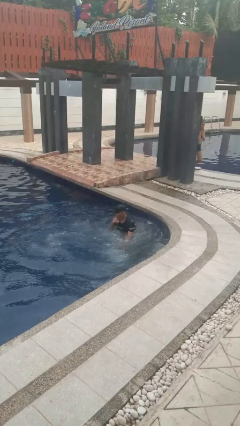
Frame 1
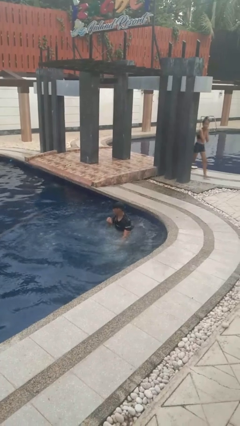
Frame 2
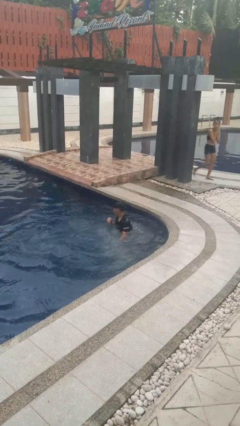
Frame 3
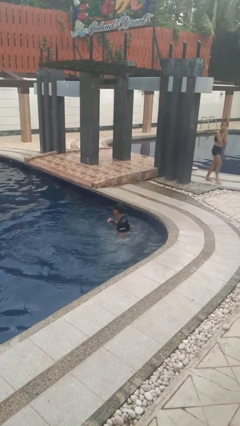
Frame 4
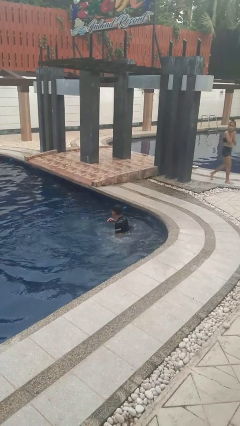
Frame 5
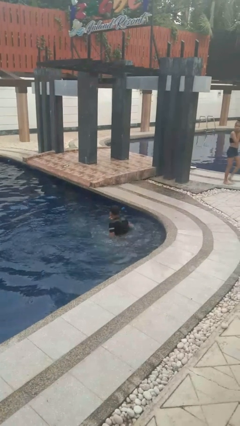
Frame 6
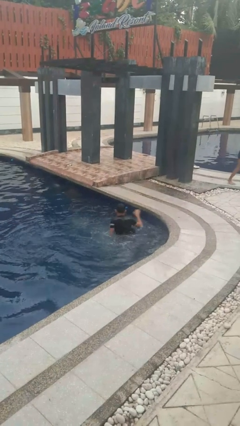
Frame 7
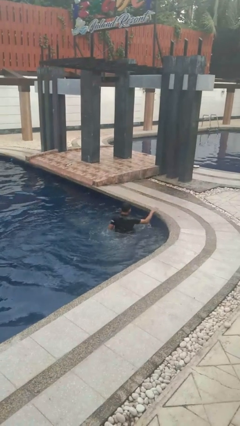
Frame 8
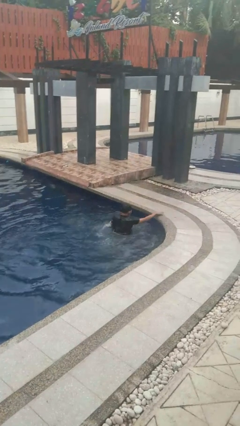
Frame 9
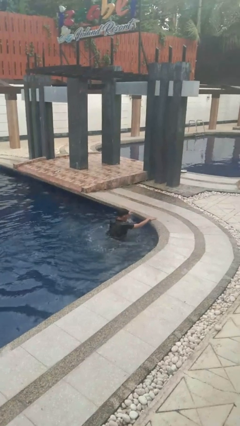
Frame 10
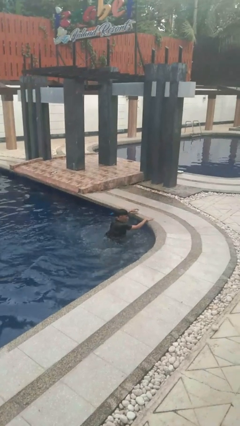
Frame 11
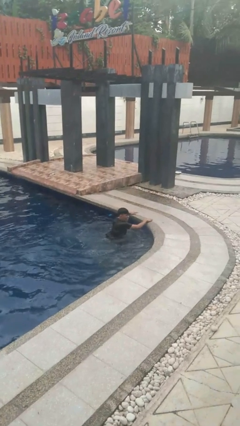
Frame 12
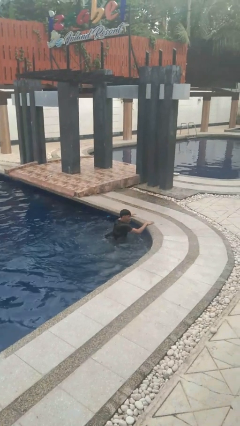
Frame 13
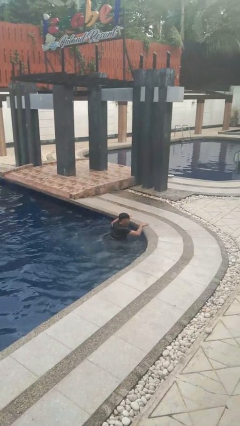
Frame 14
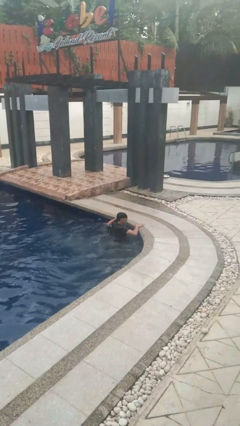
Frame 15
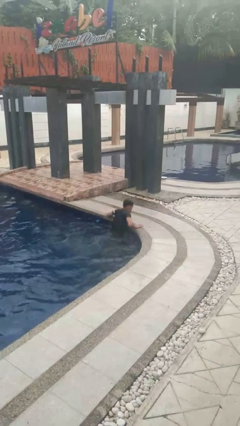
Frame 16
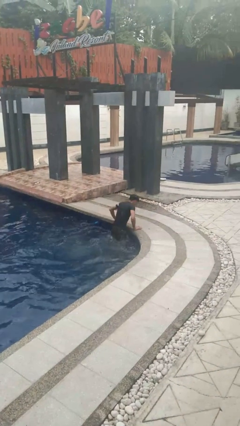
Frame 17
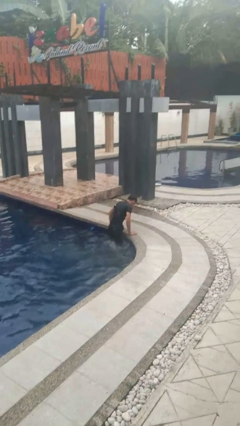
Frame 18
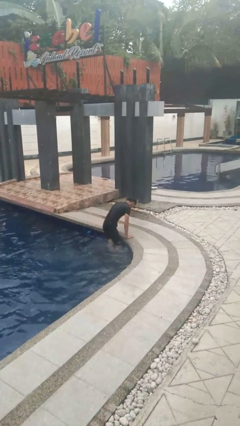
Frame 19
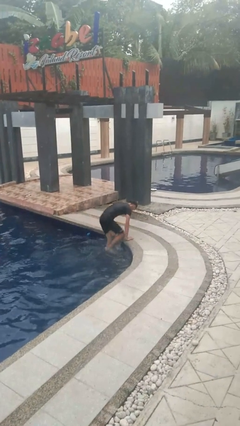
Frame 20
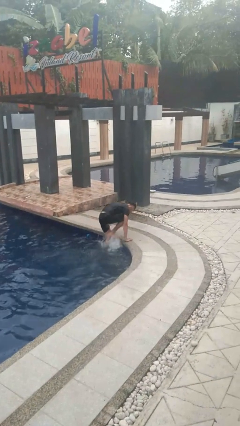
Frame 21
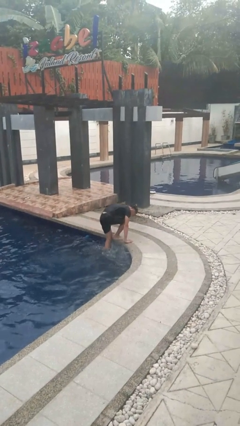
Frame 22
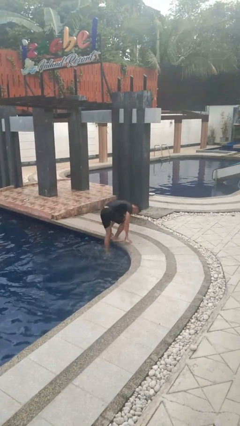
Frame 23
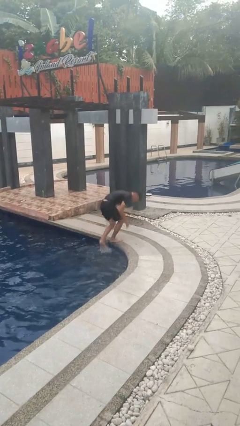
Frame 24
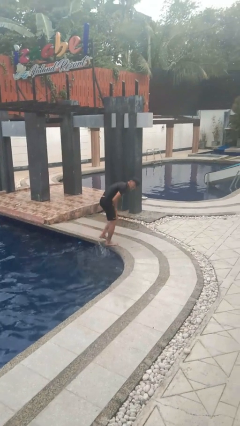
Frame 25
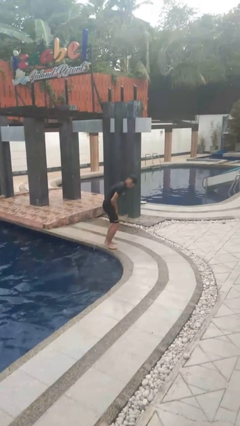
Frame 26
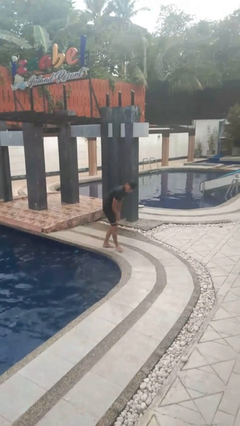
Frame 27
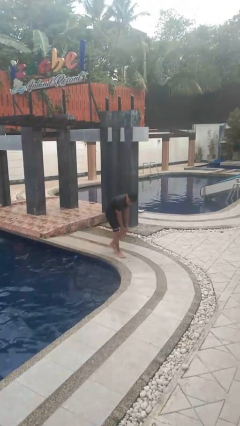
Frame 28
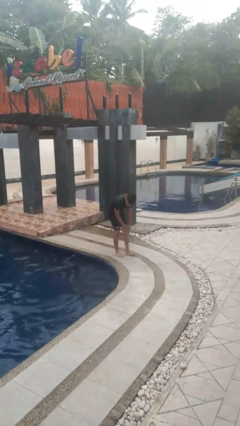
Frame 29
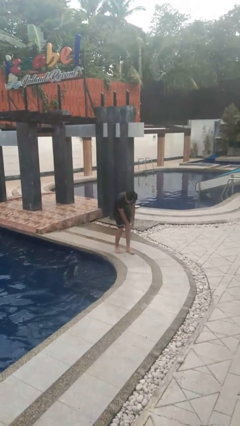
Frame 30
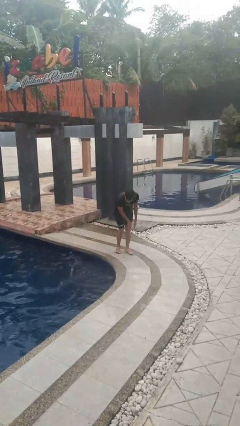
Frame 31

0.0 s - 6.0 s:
person exits pool

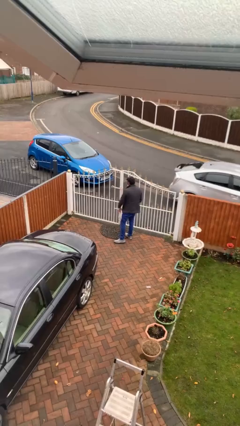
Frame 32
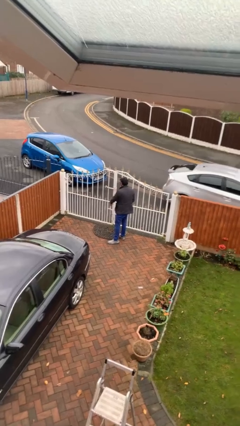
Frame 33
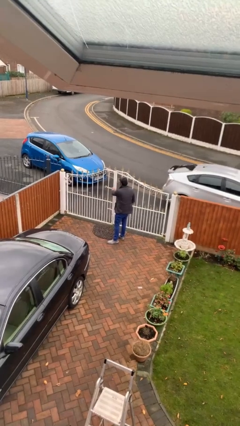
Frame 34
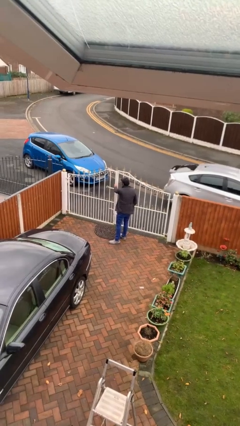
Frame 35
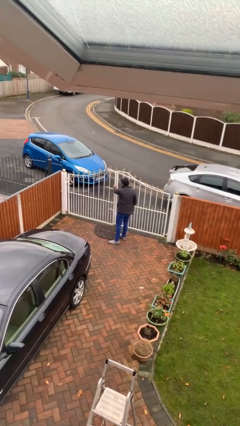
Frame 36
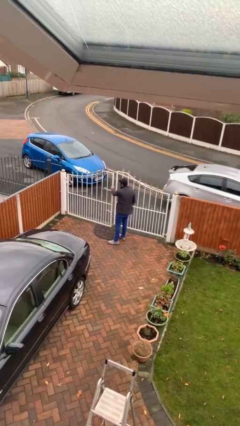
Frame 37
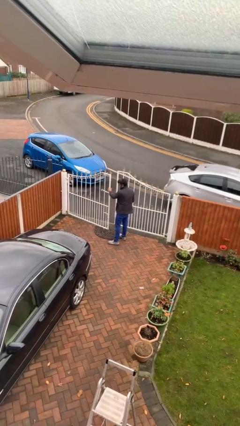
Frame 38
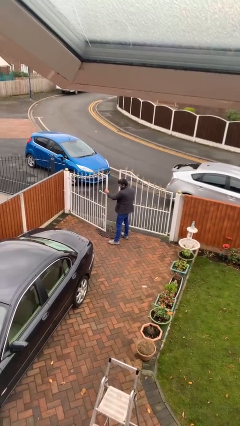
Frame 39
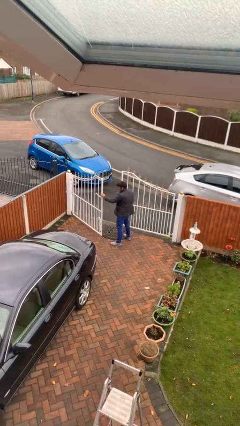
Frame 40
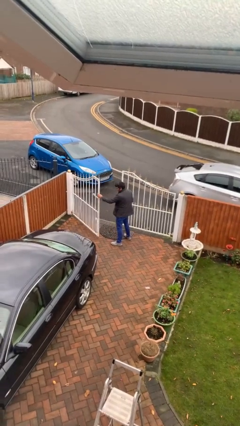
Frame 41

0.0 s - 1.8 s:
person opens facility door

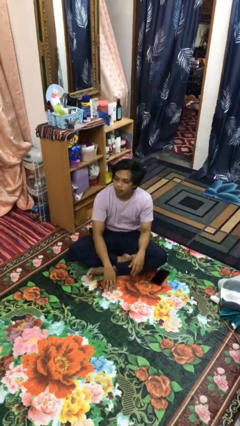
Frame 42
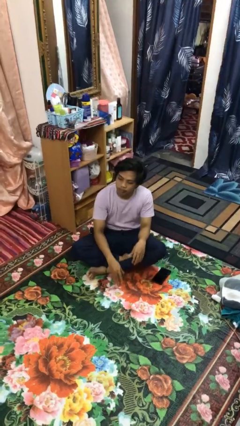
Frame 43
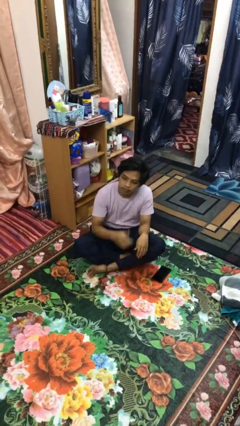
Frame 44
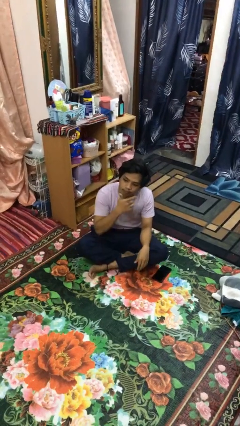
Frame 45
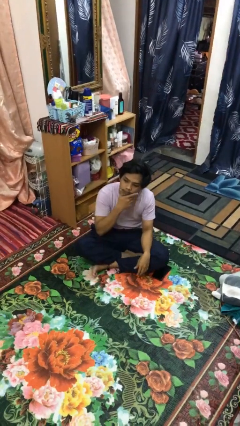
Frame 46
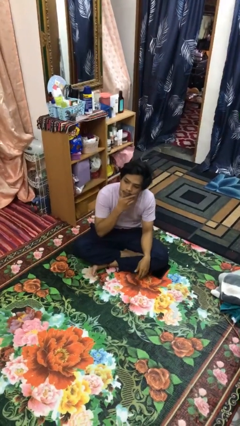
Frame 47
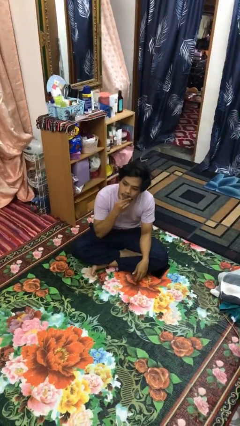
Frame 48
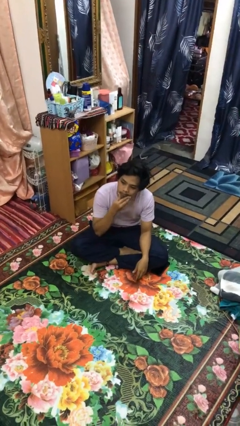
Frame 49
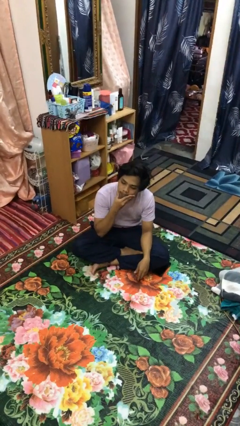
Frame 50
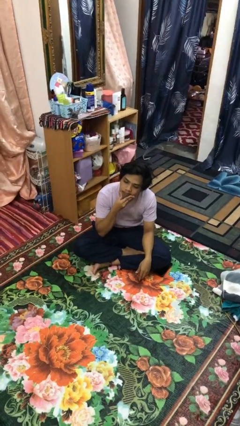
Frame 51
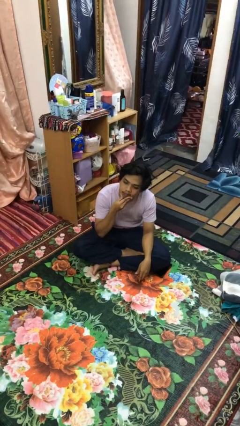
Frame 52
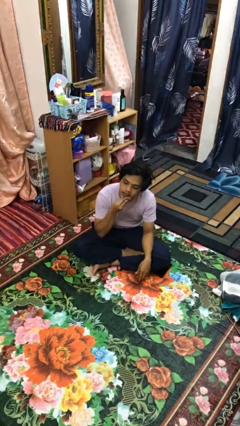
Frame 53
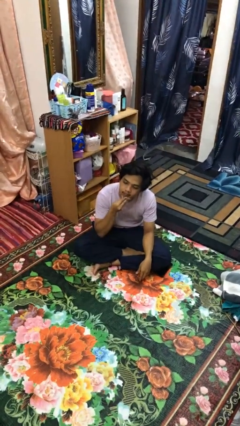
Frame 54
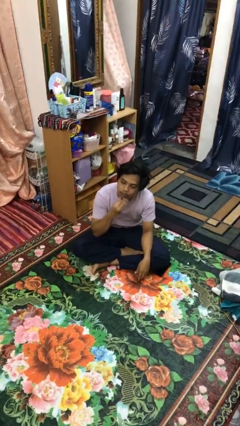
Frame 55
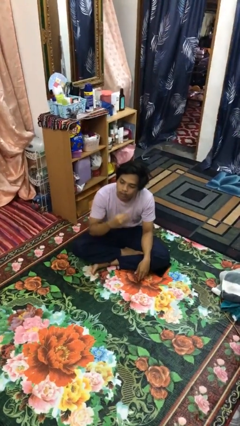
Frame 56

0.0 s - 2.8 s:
person strokes chin

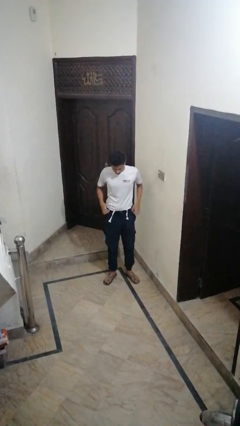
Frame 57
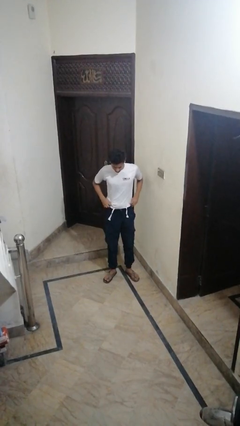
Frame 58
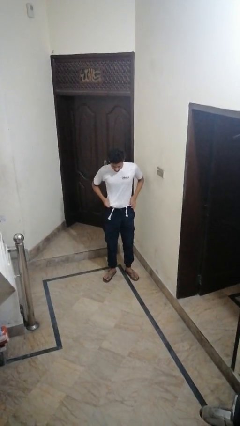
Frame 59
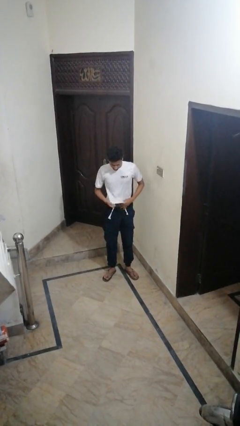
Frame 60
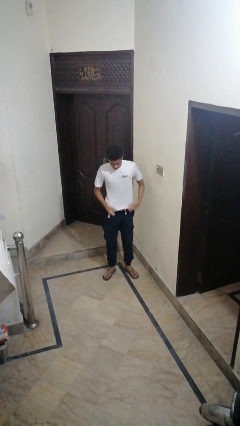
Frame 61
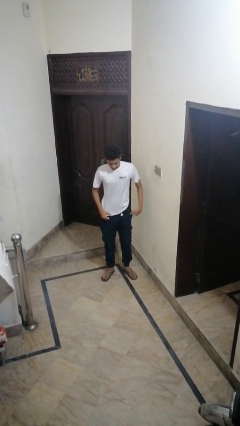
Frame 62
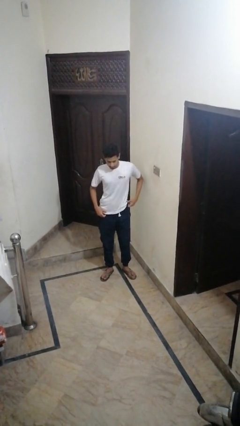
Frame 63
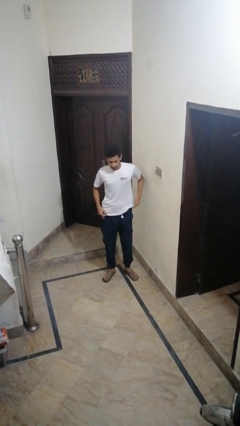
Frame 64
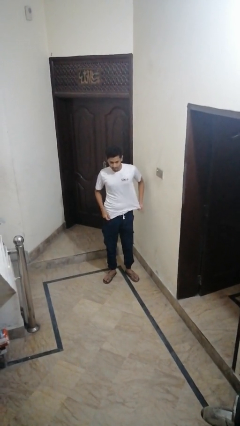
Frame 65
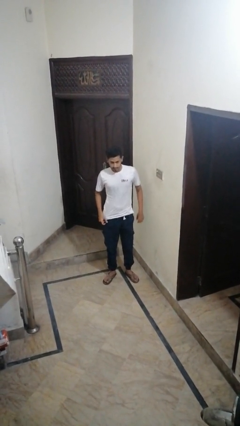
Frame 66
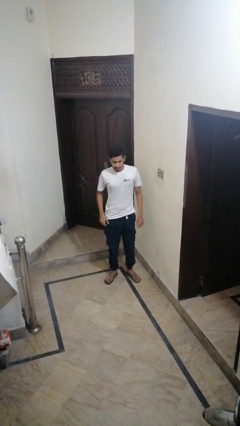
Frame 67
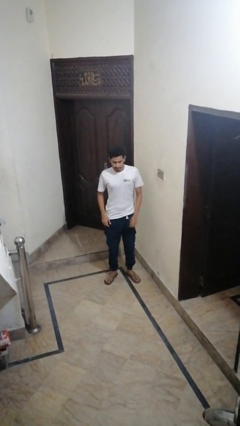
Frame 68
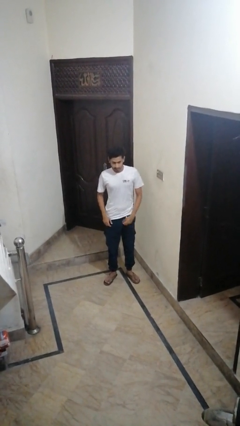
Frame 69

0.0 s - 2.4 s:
person untucks shirt

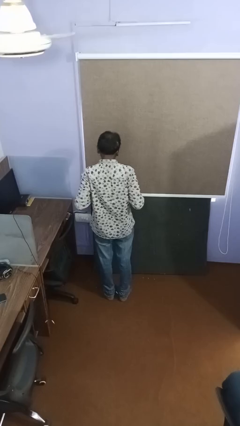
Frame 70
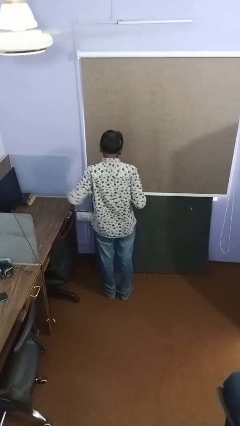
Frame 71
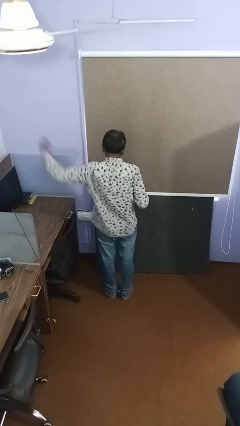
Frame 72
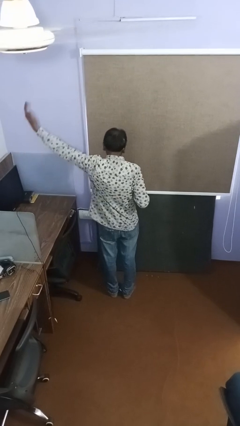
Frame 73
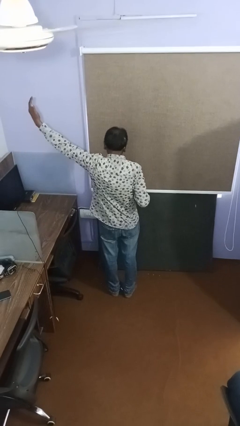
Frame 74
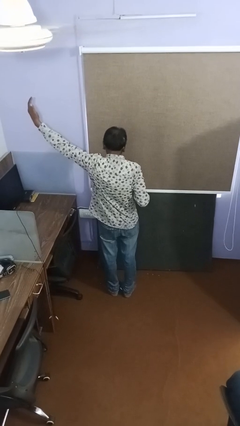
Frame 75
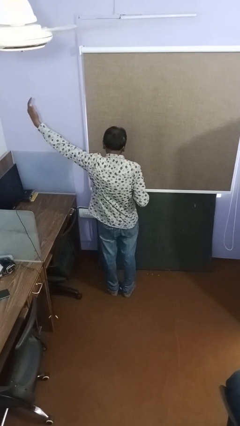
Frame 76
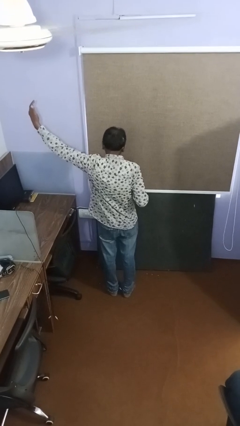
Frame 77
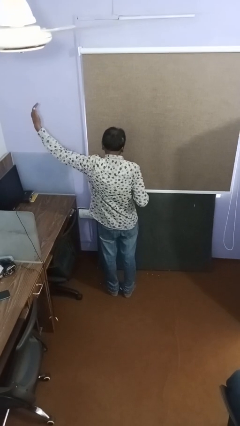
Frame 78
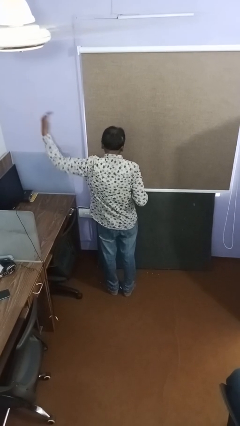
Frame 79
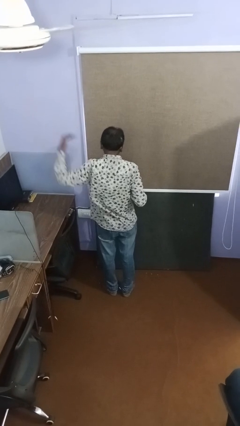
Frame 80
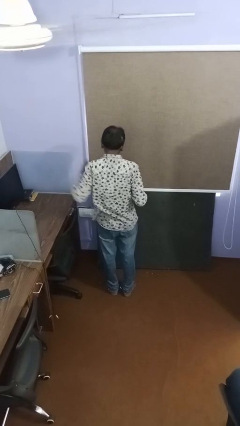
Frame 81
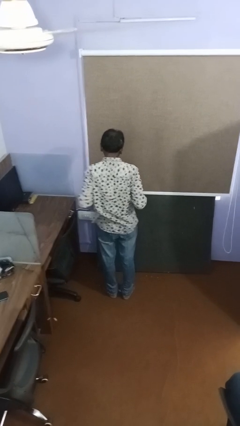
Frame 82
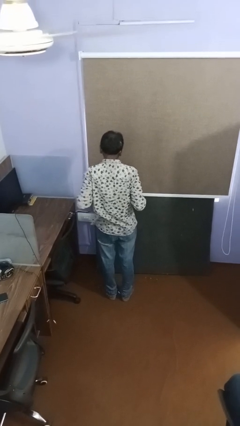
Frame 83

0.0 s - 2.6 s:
person gestures swipe left

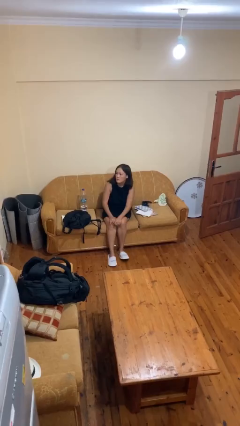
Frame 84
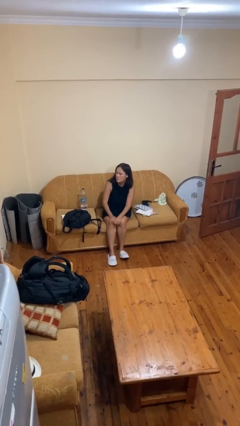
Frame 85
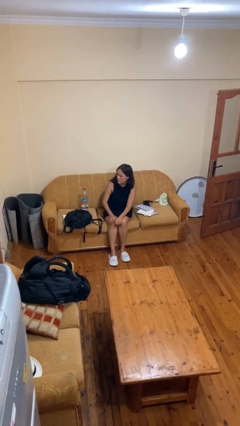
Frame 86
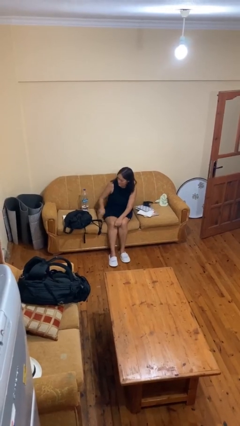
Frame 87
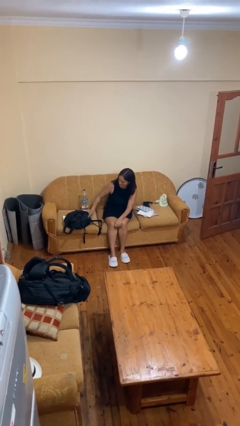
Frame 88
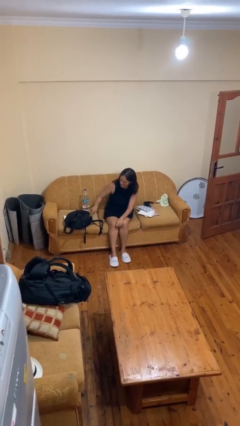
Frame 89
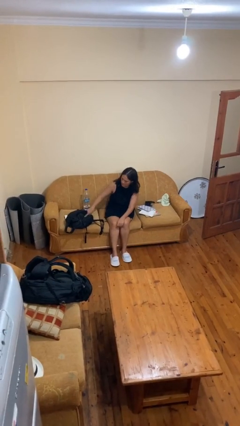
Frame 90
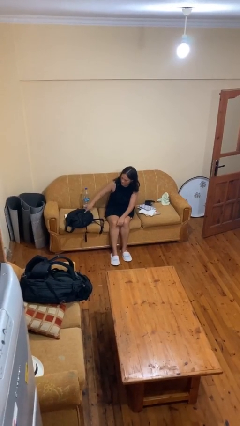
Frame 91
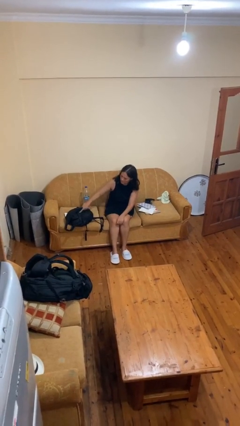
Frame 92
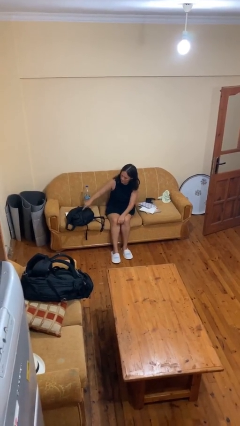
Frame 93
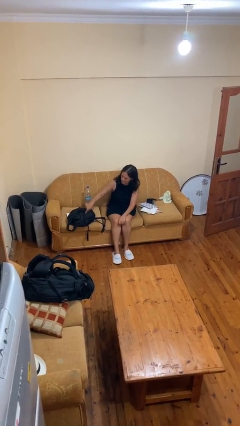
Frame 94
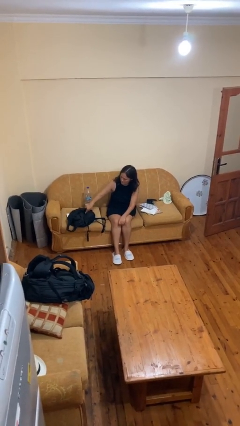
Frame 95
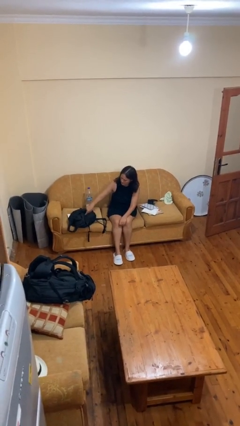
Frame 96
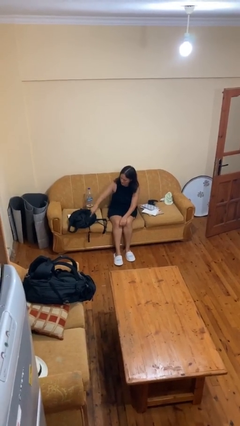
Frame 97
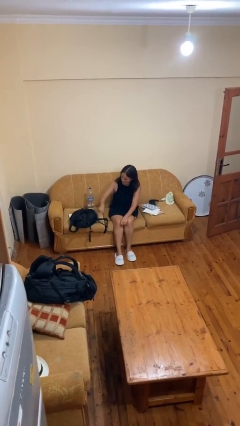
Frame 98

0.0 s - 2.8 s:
person taps object with finger
